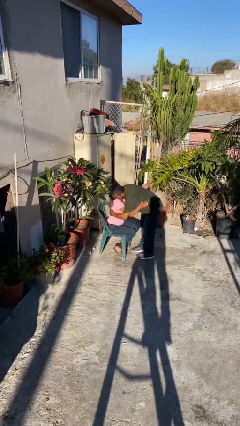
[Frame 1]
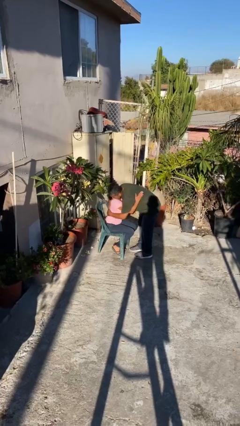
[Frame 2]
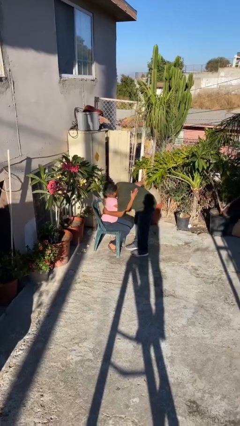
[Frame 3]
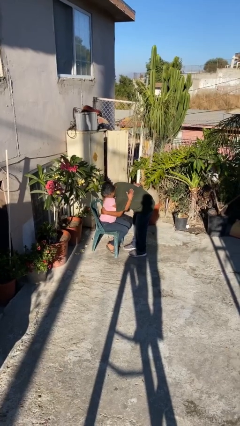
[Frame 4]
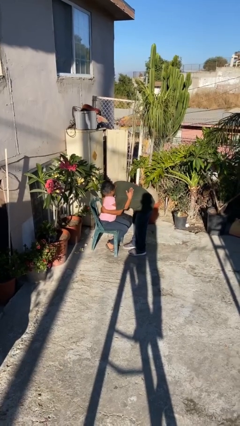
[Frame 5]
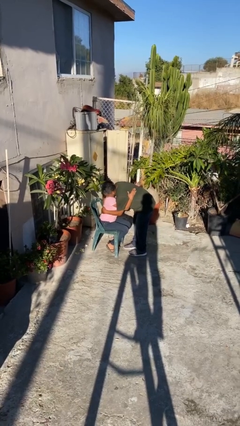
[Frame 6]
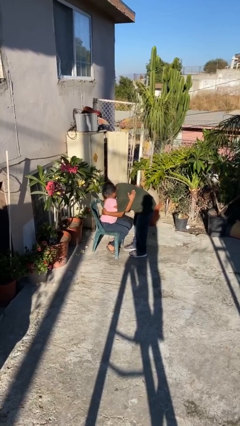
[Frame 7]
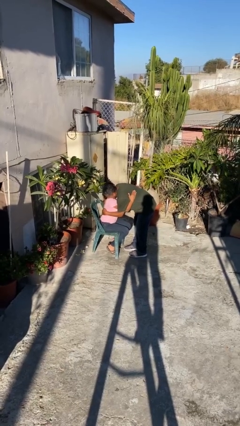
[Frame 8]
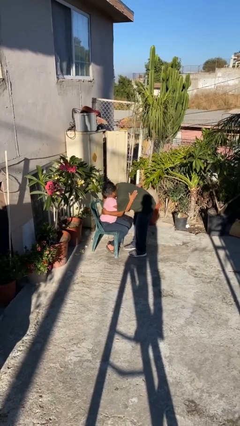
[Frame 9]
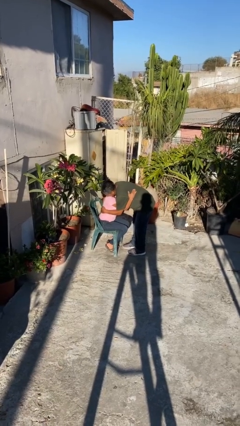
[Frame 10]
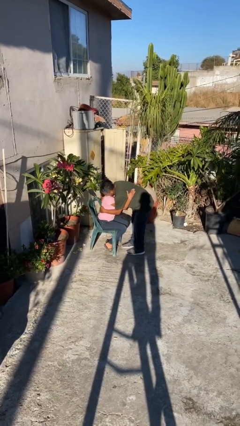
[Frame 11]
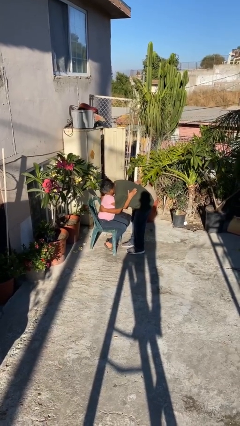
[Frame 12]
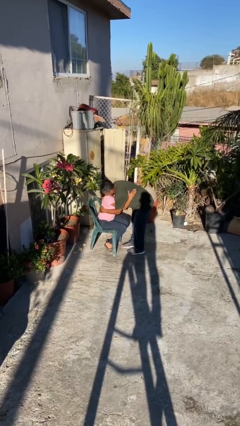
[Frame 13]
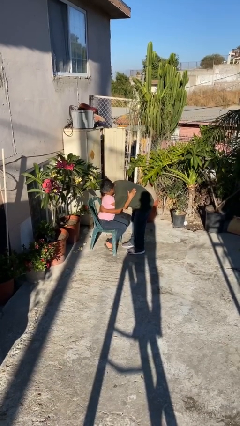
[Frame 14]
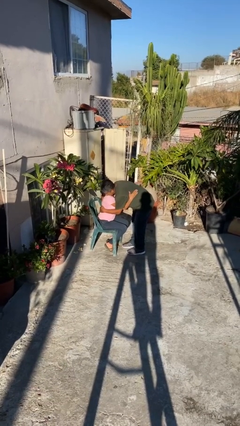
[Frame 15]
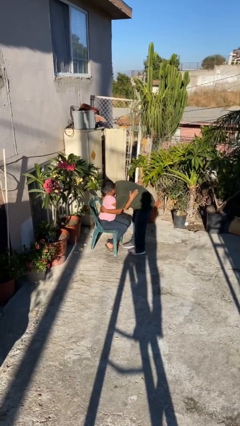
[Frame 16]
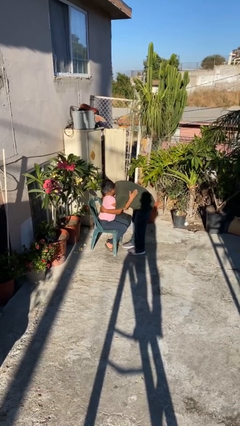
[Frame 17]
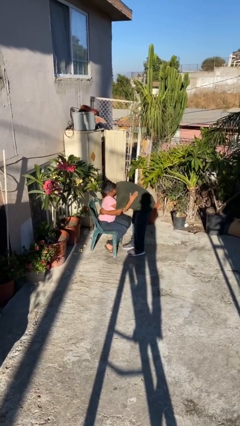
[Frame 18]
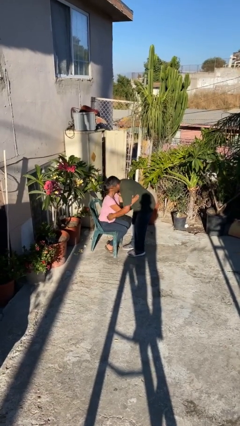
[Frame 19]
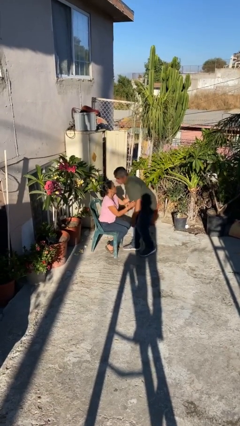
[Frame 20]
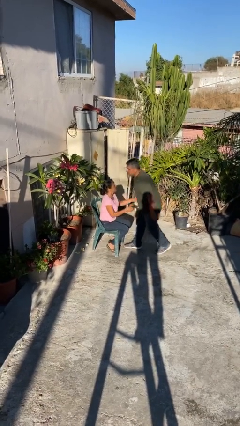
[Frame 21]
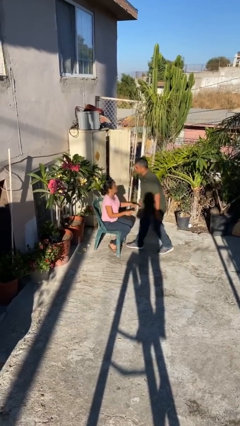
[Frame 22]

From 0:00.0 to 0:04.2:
person embraces person

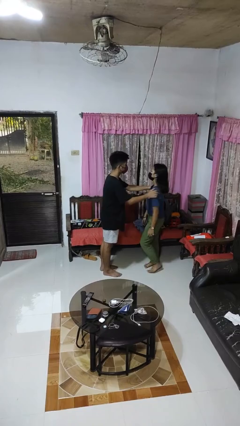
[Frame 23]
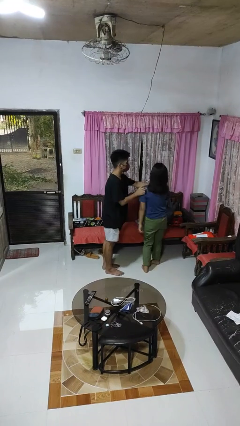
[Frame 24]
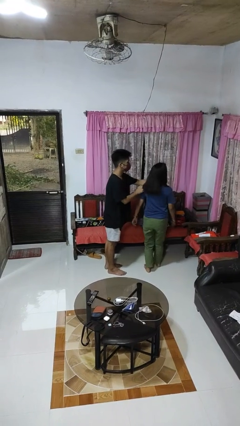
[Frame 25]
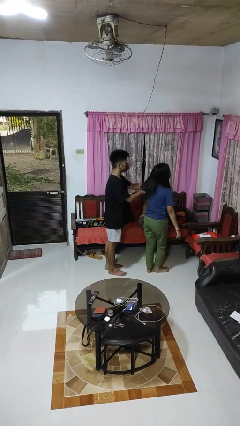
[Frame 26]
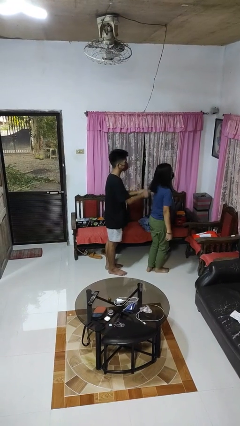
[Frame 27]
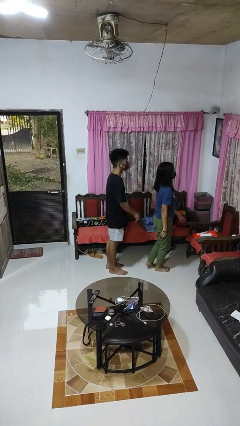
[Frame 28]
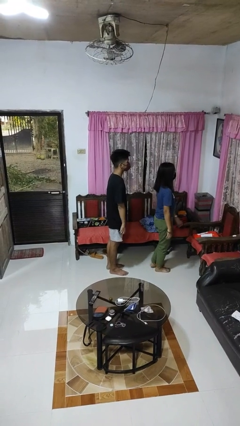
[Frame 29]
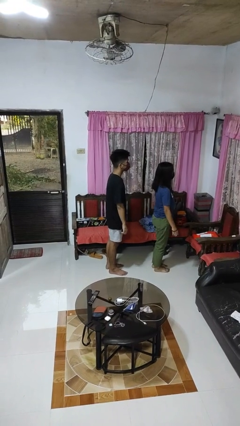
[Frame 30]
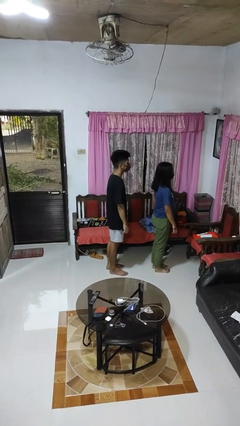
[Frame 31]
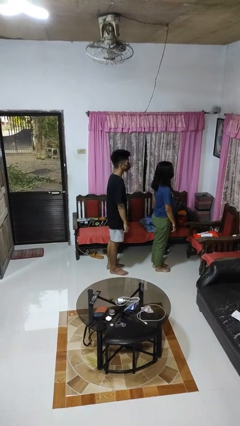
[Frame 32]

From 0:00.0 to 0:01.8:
person spins person around

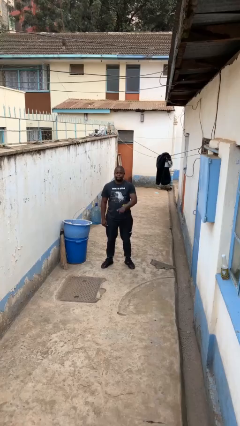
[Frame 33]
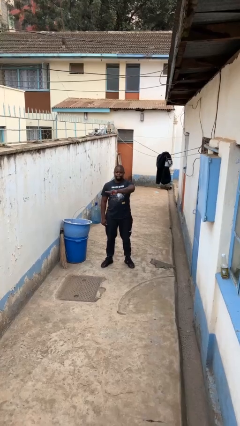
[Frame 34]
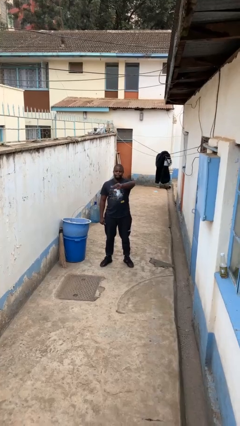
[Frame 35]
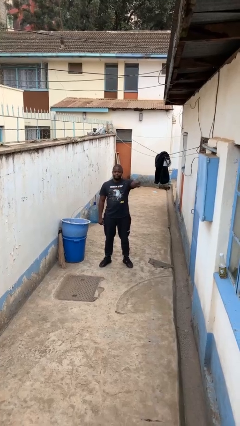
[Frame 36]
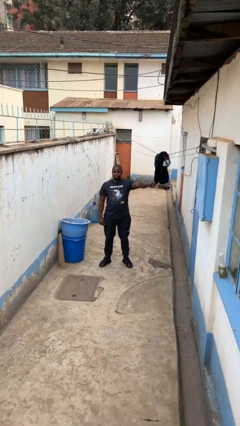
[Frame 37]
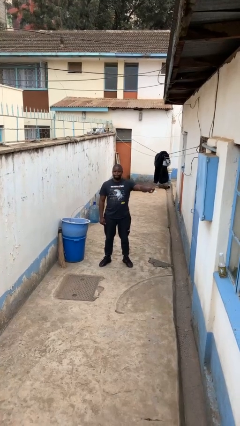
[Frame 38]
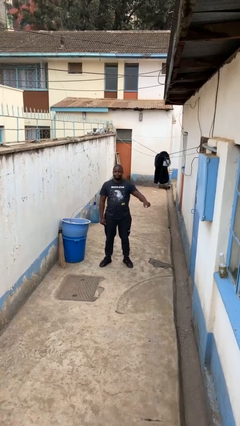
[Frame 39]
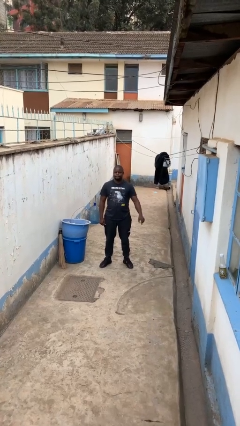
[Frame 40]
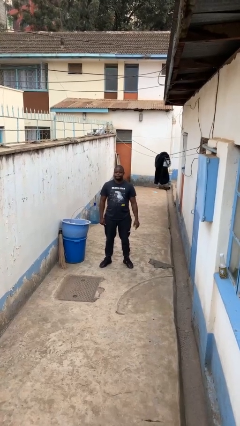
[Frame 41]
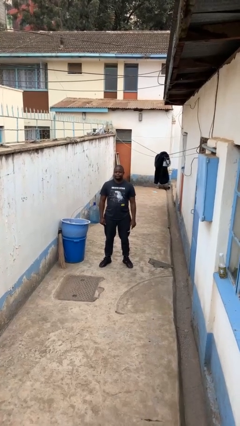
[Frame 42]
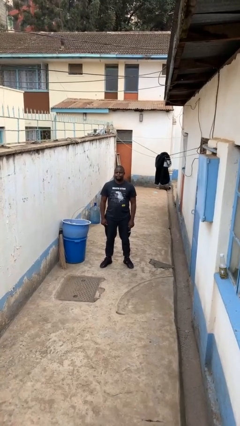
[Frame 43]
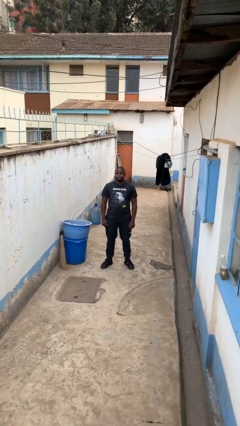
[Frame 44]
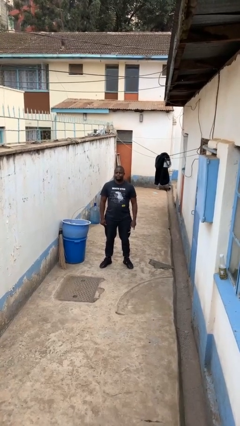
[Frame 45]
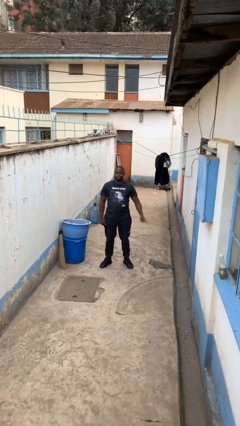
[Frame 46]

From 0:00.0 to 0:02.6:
person gestures swipe left

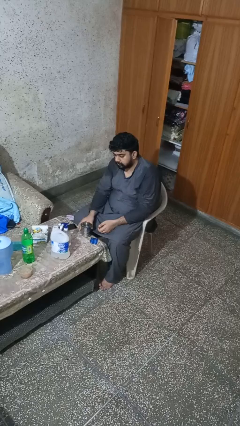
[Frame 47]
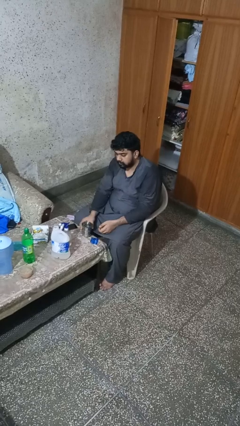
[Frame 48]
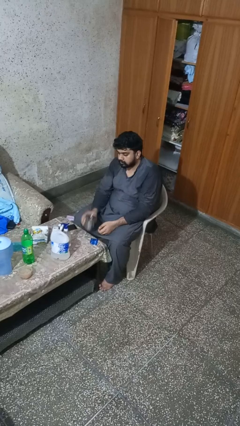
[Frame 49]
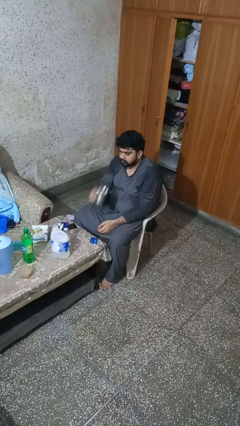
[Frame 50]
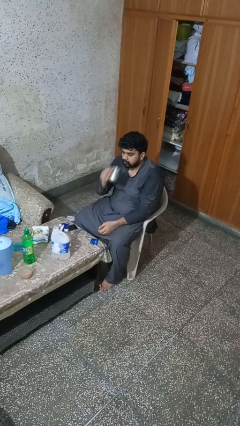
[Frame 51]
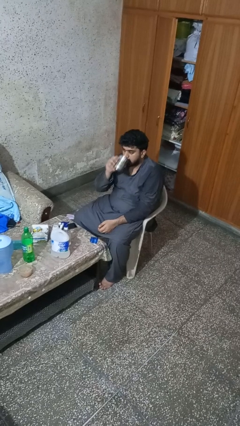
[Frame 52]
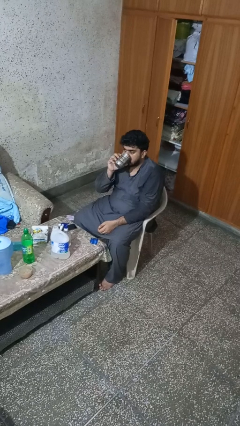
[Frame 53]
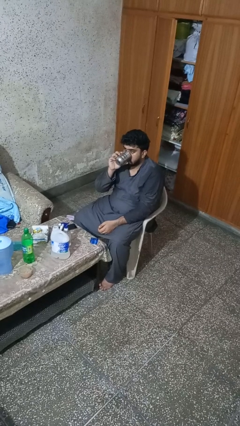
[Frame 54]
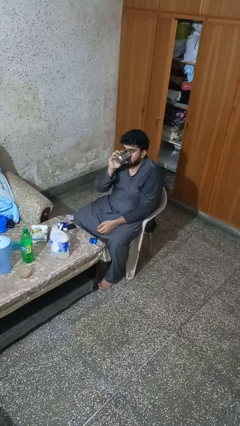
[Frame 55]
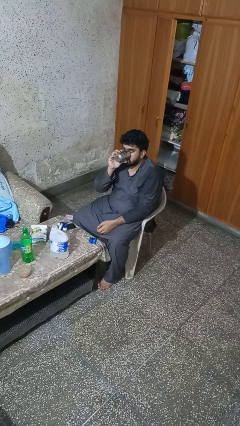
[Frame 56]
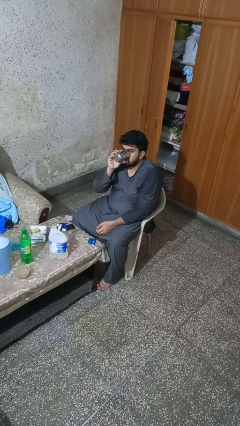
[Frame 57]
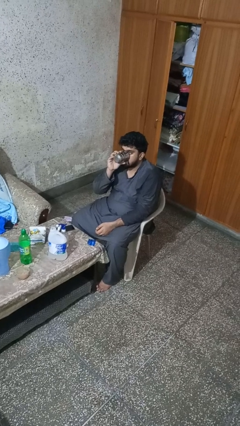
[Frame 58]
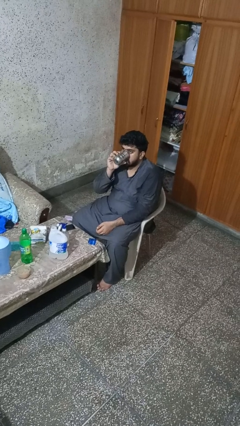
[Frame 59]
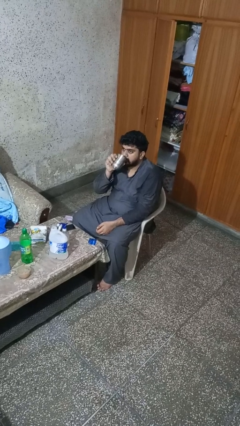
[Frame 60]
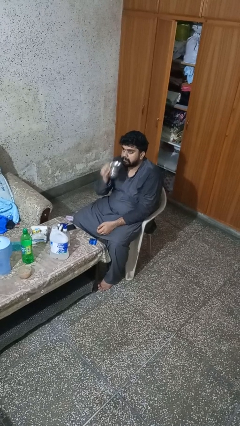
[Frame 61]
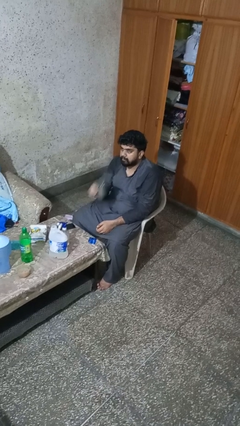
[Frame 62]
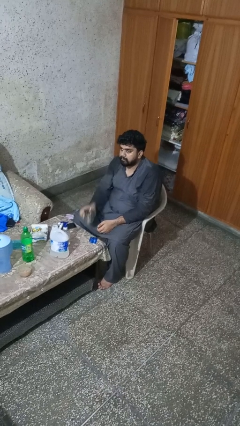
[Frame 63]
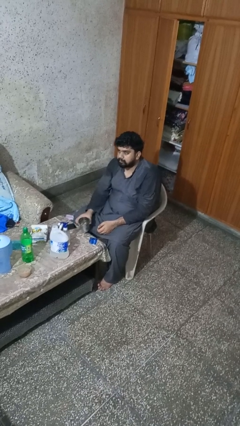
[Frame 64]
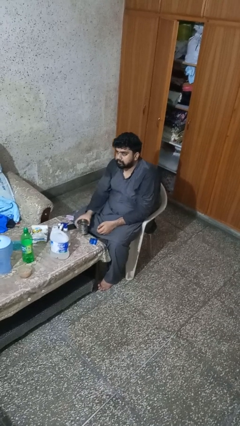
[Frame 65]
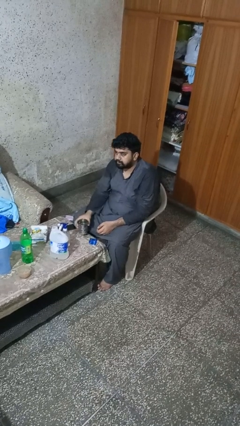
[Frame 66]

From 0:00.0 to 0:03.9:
person drinks from cup

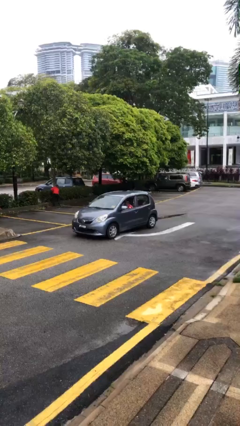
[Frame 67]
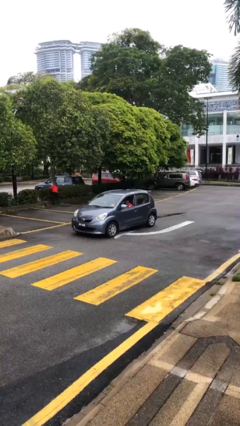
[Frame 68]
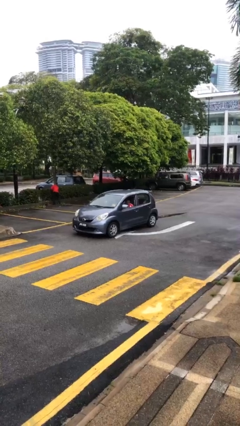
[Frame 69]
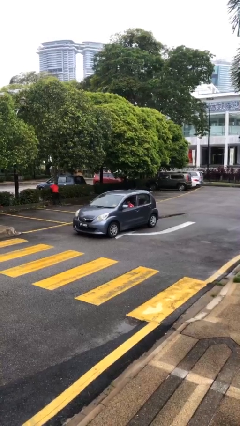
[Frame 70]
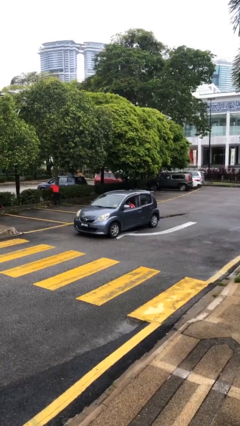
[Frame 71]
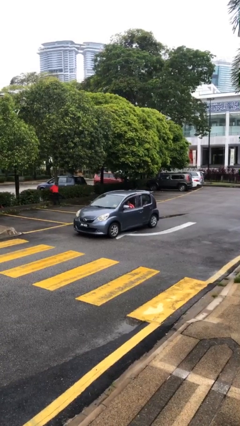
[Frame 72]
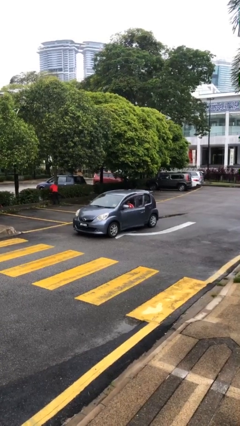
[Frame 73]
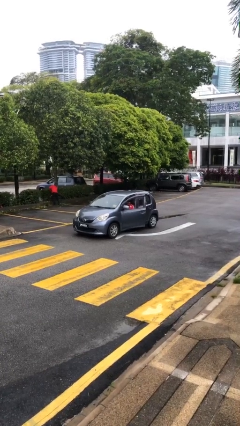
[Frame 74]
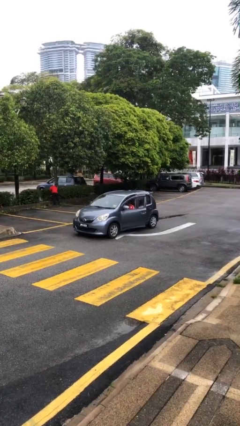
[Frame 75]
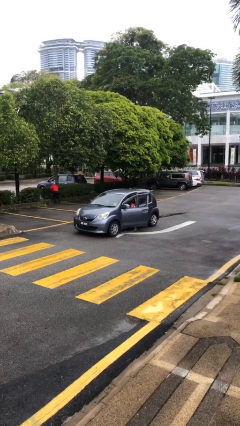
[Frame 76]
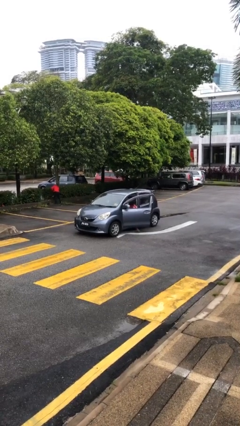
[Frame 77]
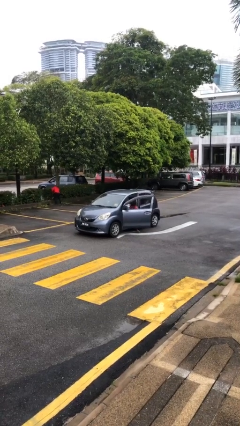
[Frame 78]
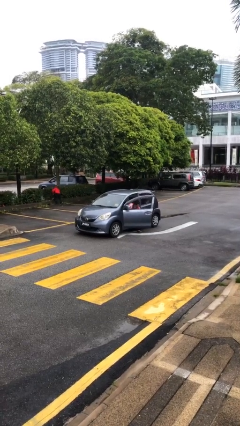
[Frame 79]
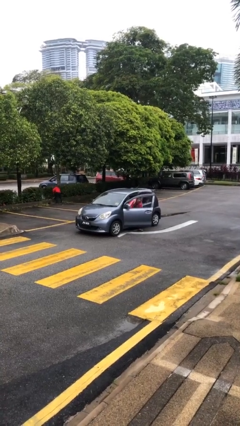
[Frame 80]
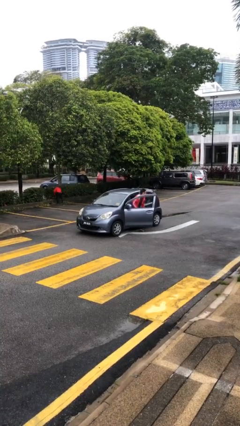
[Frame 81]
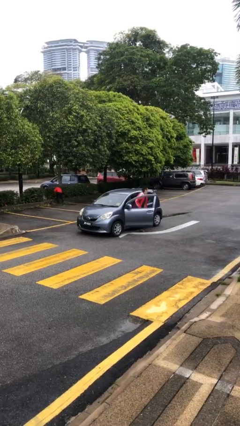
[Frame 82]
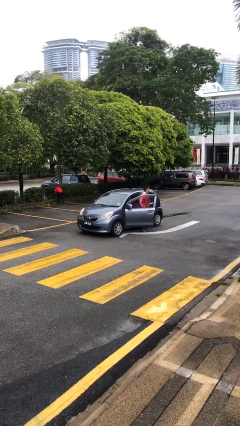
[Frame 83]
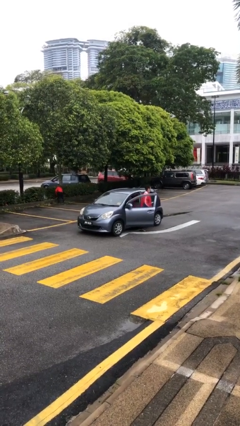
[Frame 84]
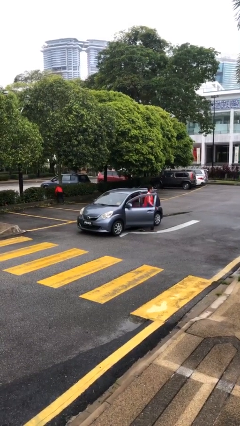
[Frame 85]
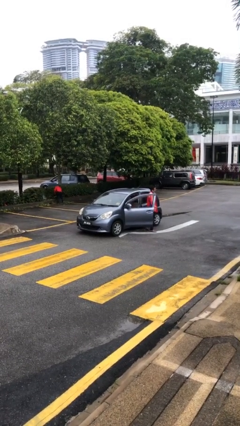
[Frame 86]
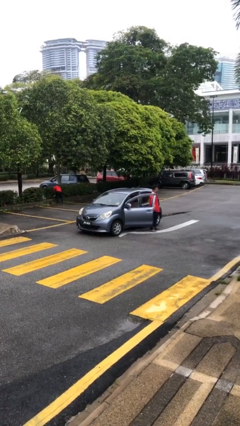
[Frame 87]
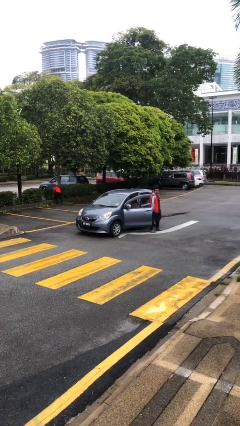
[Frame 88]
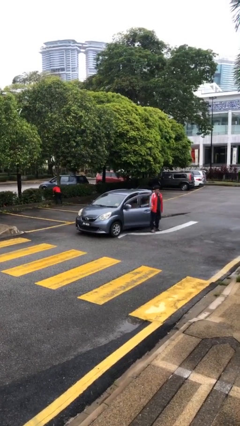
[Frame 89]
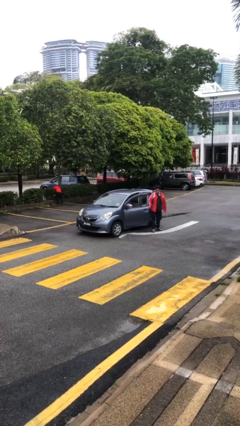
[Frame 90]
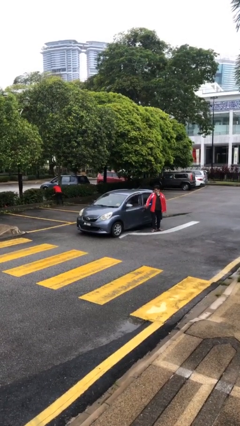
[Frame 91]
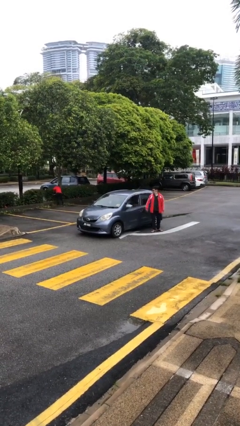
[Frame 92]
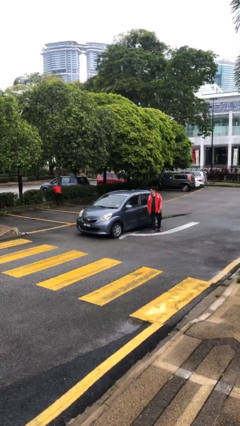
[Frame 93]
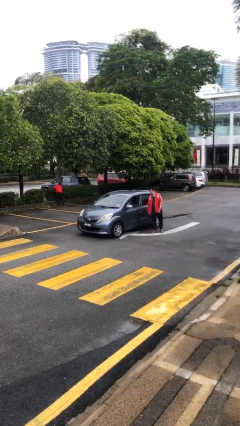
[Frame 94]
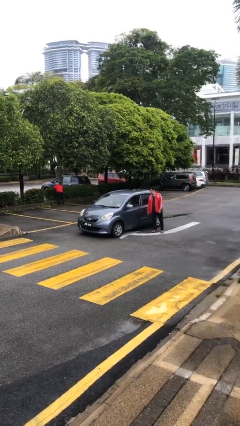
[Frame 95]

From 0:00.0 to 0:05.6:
car drops off person
